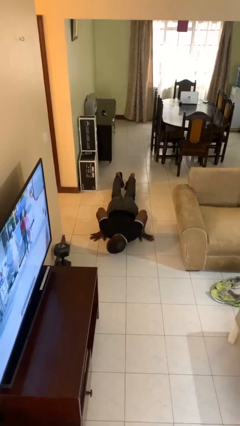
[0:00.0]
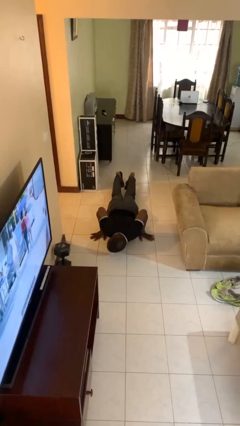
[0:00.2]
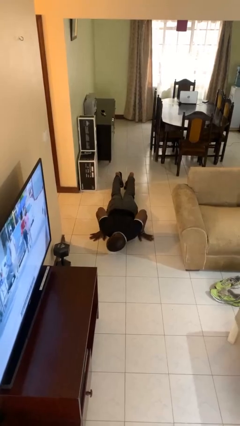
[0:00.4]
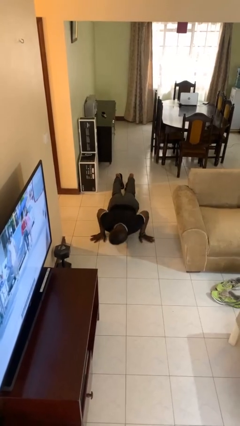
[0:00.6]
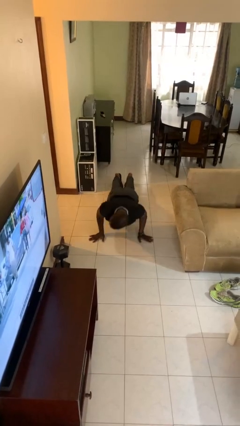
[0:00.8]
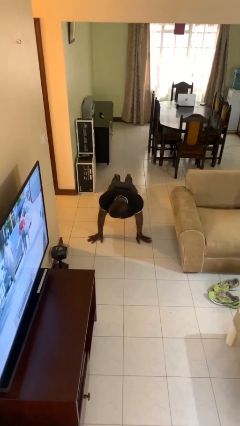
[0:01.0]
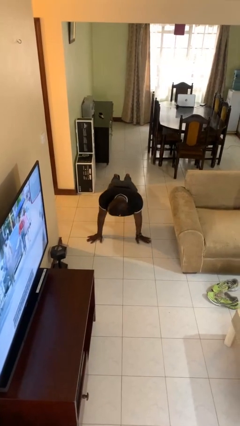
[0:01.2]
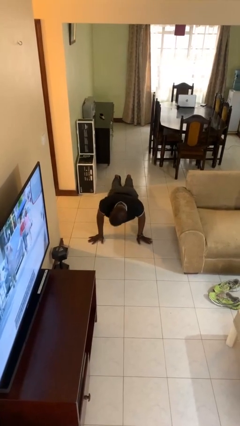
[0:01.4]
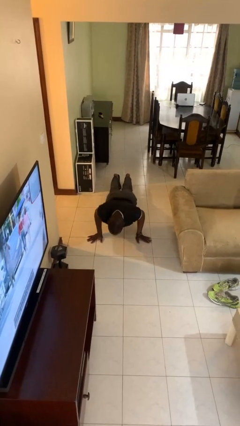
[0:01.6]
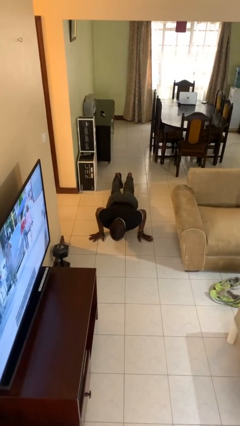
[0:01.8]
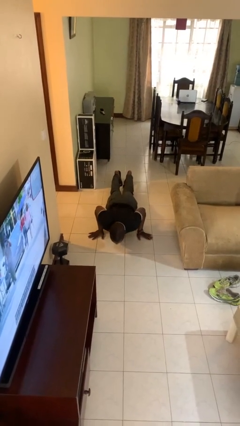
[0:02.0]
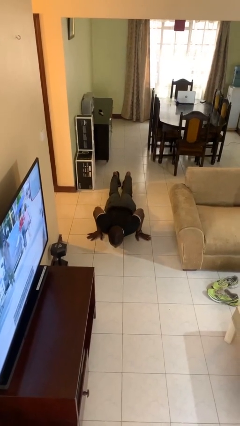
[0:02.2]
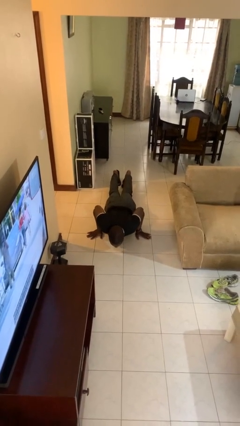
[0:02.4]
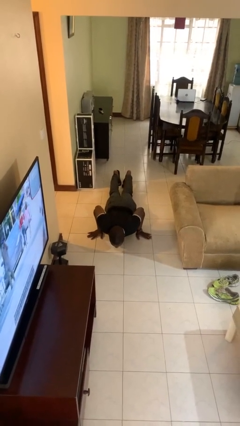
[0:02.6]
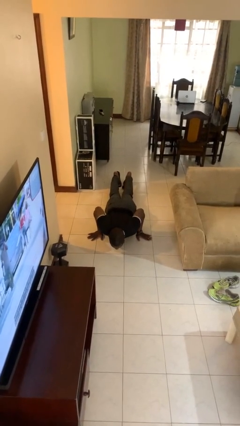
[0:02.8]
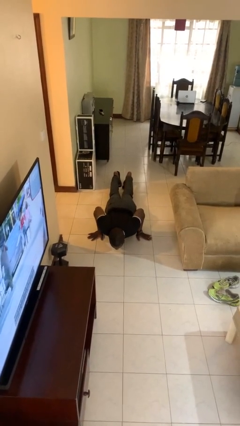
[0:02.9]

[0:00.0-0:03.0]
person exercises with pushup

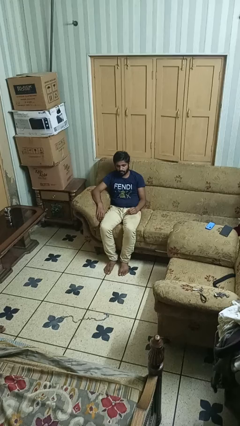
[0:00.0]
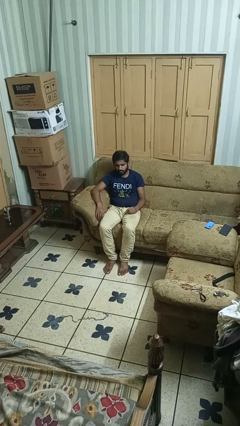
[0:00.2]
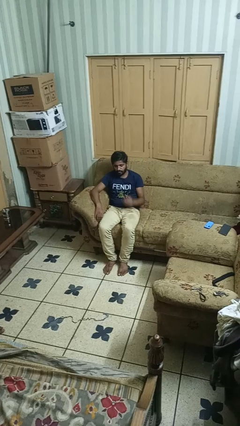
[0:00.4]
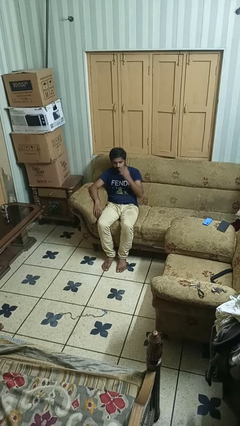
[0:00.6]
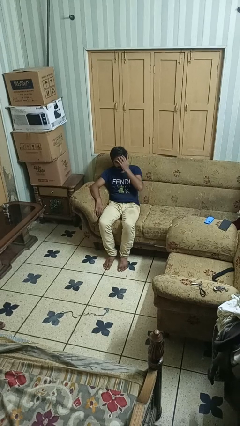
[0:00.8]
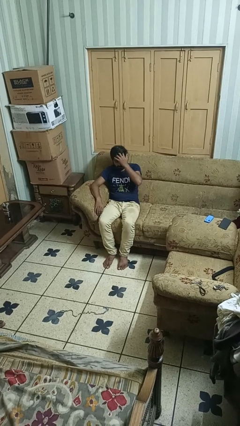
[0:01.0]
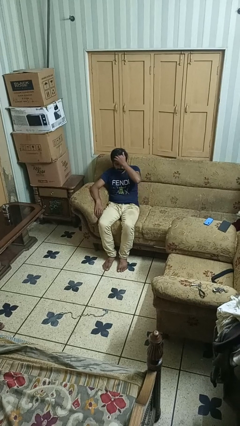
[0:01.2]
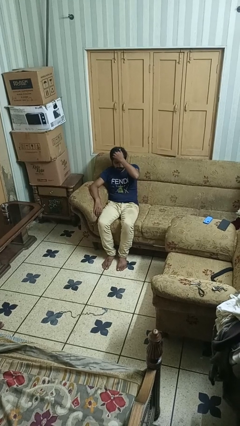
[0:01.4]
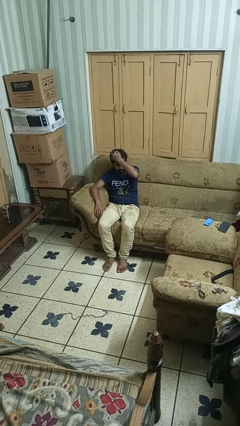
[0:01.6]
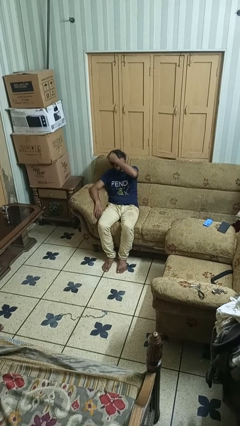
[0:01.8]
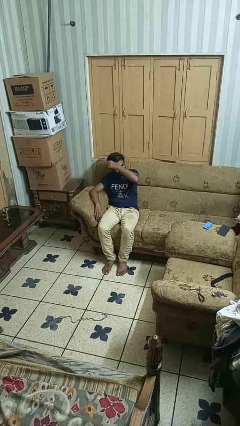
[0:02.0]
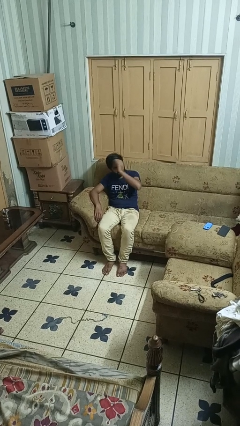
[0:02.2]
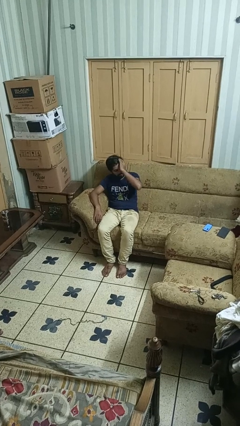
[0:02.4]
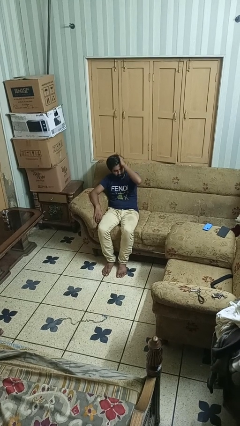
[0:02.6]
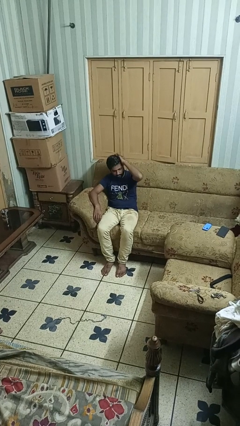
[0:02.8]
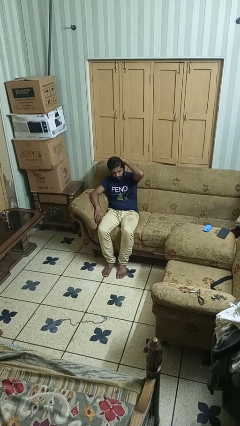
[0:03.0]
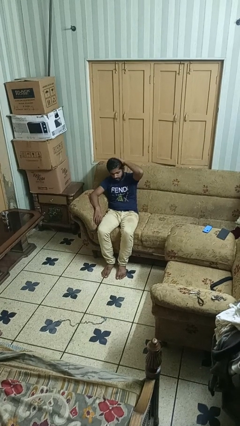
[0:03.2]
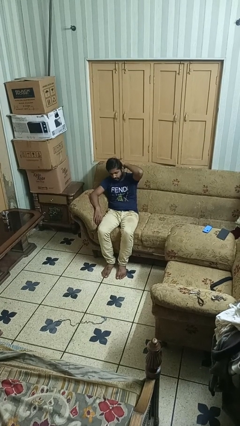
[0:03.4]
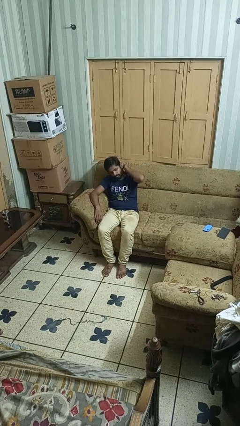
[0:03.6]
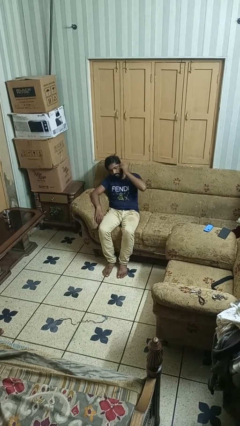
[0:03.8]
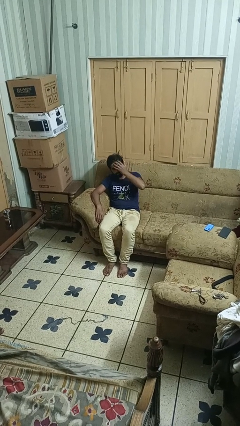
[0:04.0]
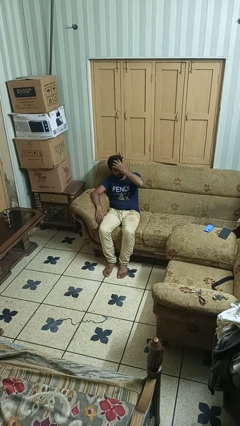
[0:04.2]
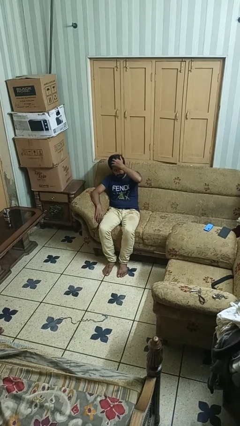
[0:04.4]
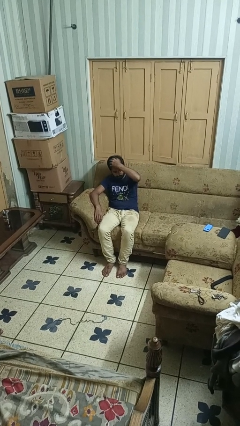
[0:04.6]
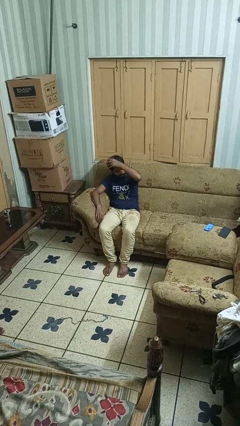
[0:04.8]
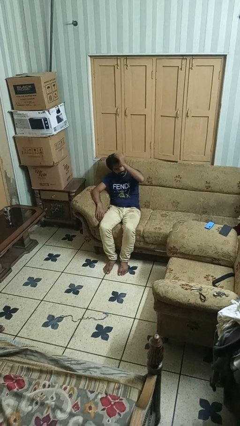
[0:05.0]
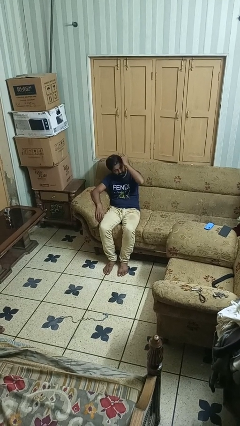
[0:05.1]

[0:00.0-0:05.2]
person strokes hair

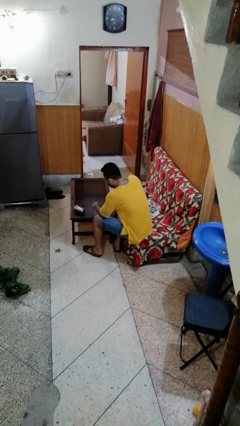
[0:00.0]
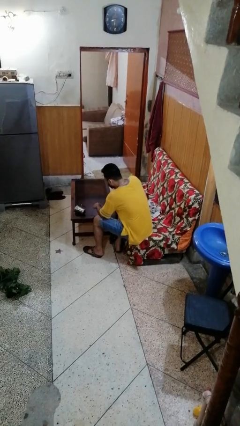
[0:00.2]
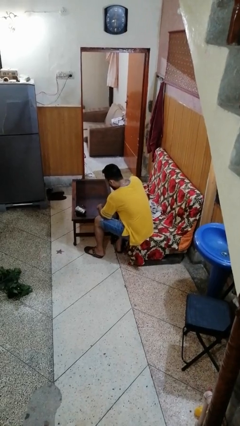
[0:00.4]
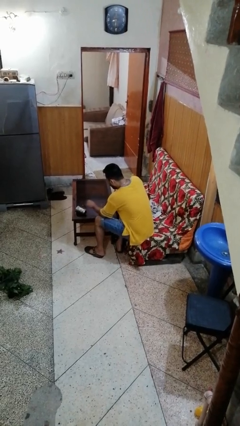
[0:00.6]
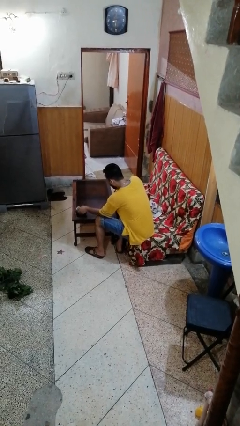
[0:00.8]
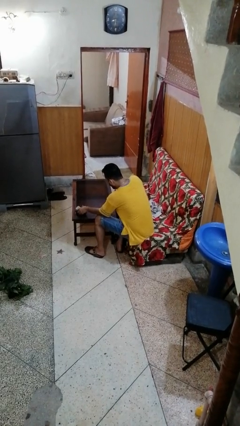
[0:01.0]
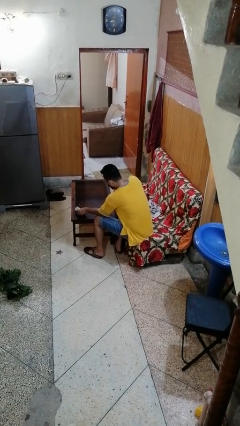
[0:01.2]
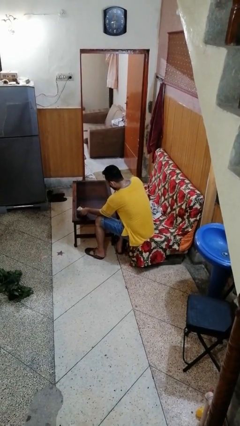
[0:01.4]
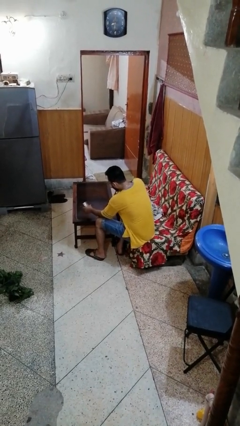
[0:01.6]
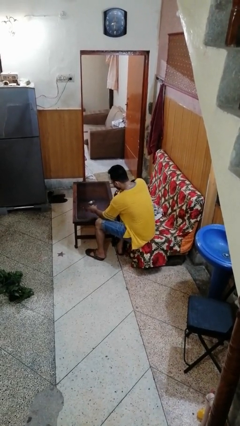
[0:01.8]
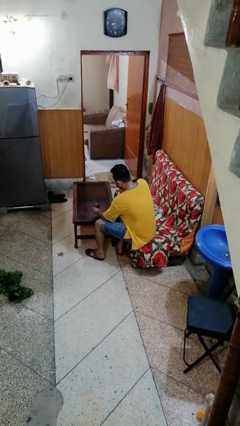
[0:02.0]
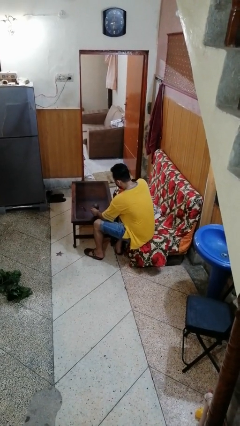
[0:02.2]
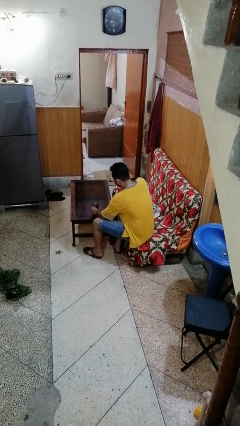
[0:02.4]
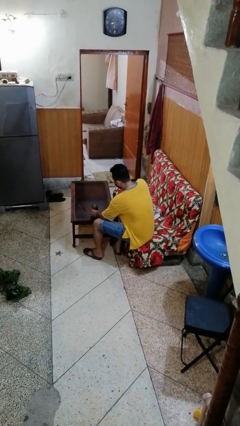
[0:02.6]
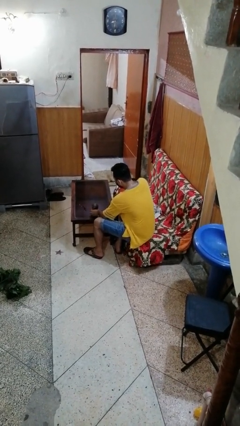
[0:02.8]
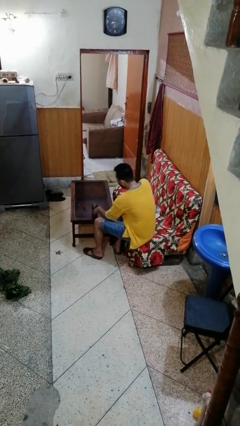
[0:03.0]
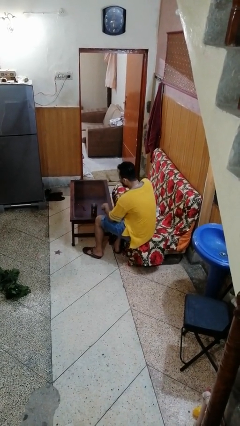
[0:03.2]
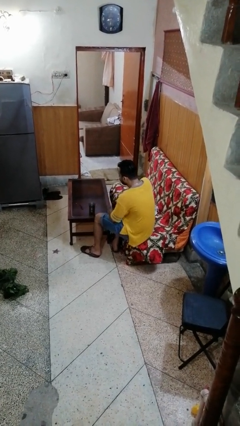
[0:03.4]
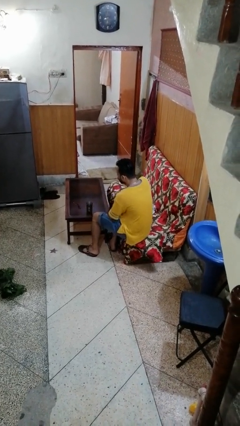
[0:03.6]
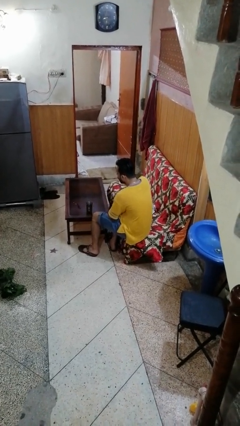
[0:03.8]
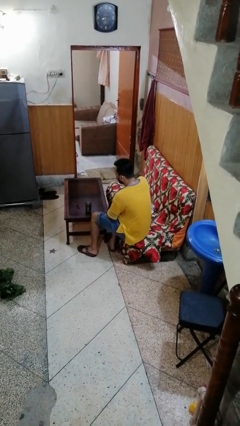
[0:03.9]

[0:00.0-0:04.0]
person sets upright glass

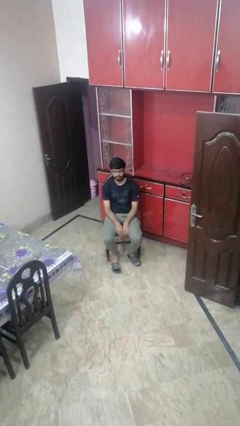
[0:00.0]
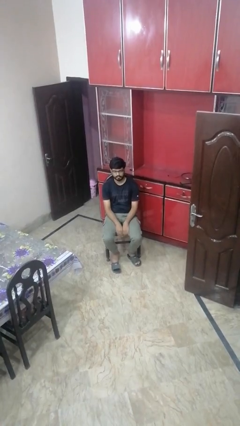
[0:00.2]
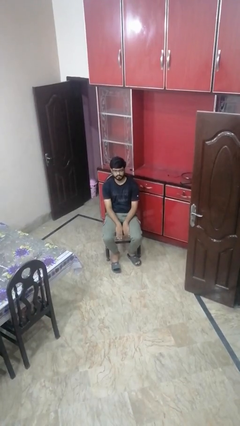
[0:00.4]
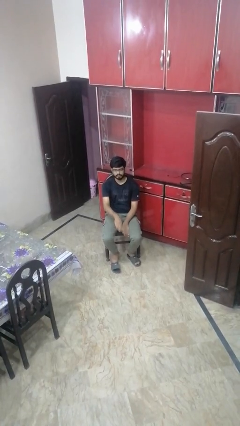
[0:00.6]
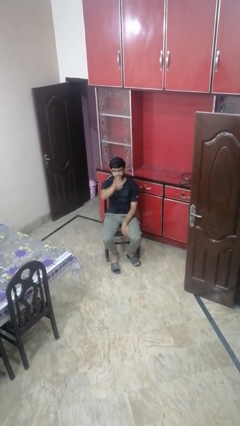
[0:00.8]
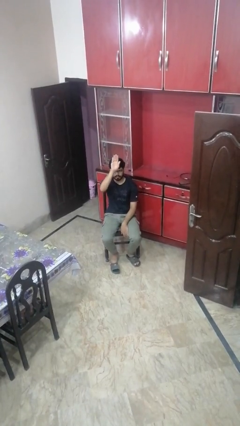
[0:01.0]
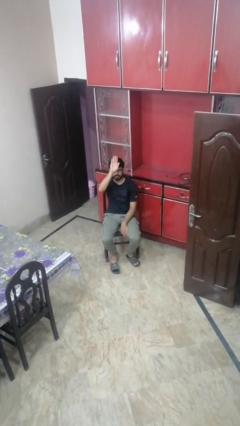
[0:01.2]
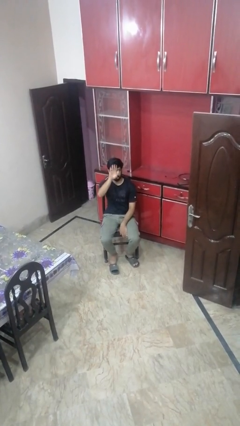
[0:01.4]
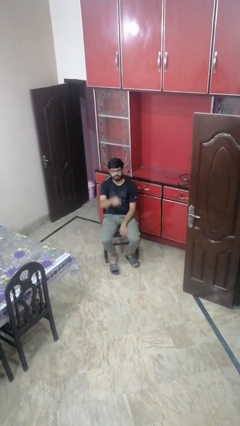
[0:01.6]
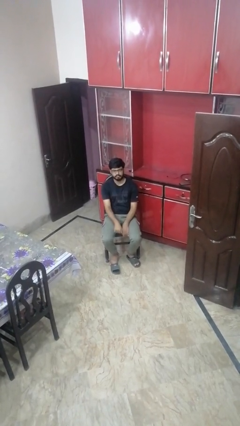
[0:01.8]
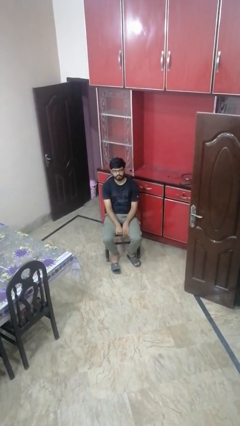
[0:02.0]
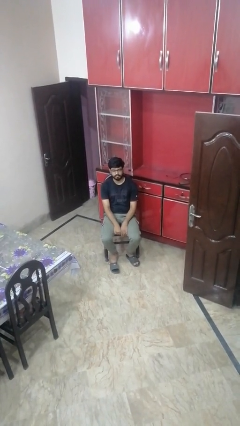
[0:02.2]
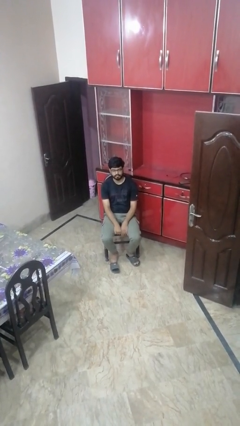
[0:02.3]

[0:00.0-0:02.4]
person gestures swipe up

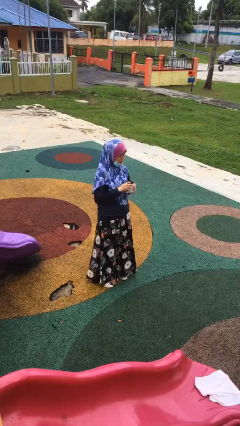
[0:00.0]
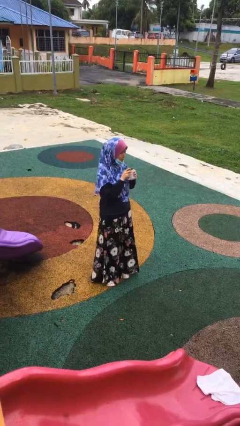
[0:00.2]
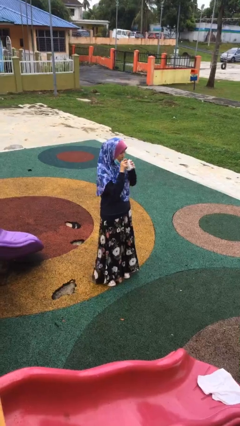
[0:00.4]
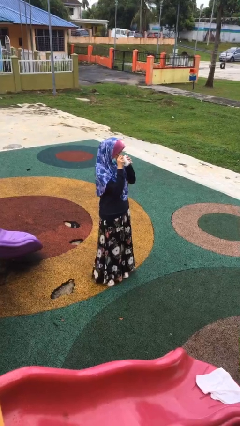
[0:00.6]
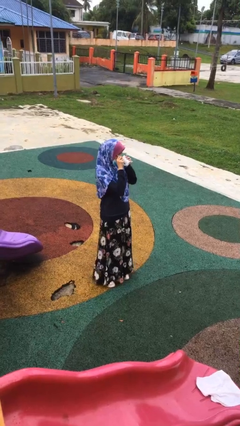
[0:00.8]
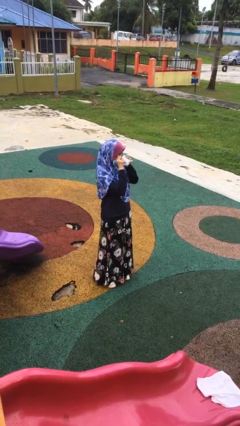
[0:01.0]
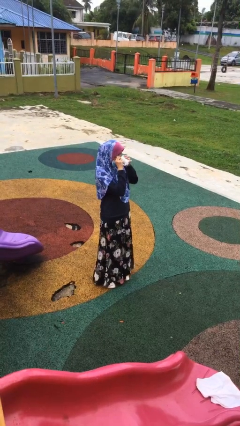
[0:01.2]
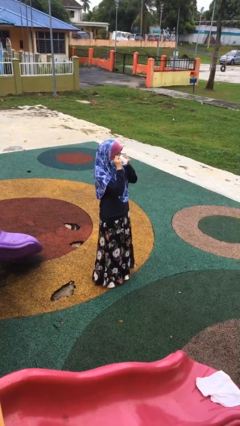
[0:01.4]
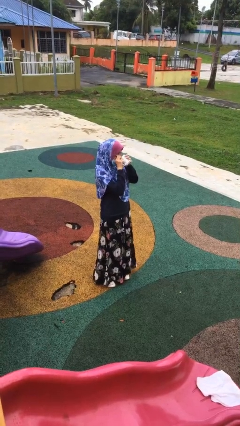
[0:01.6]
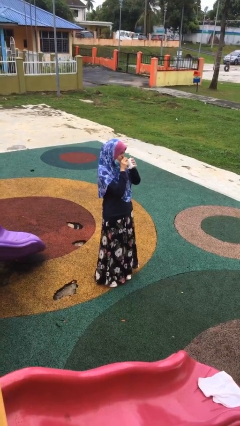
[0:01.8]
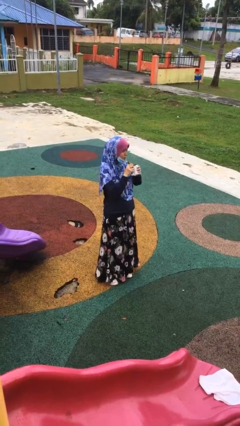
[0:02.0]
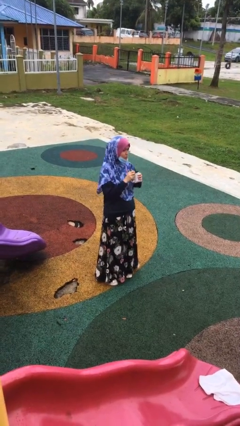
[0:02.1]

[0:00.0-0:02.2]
person drinks from mug

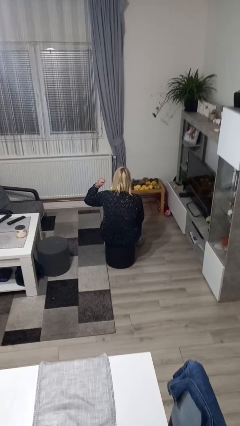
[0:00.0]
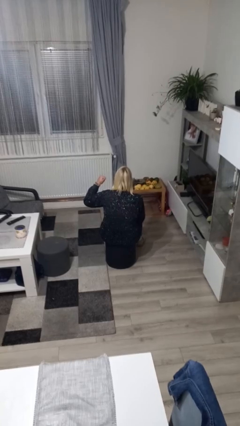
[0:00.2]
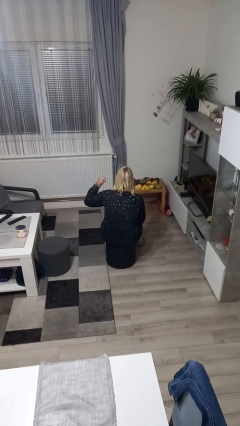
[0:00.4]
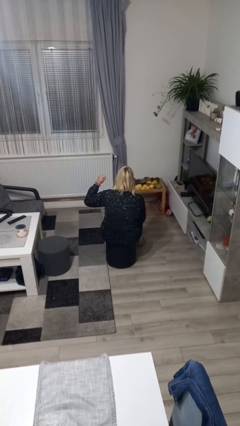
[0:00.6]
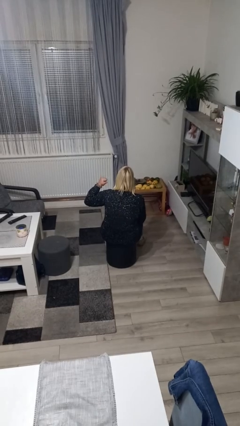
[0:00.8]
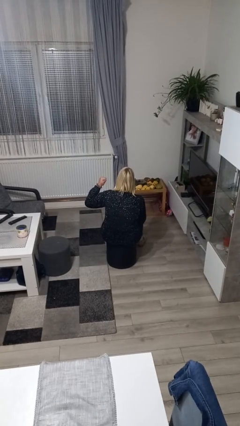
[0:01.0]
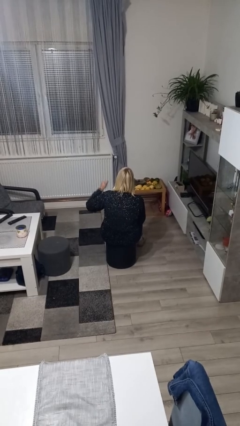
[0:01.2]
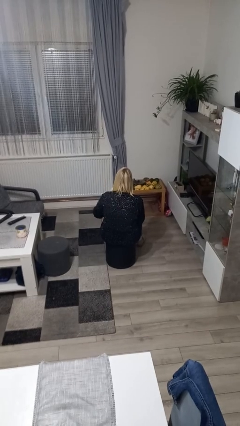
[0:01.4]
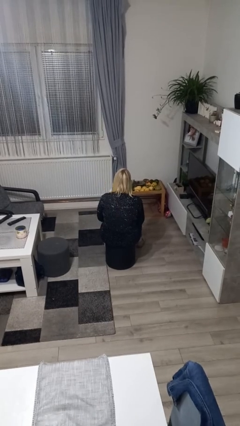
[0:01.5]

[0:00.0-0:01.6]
person gestures behind me
